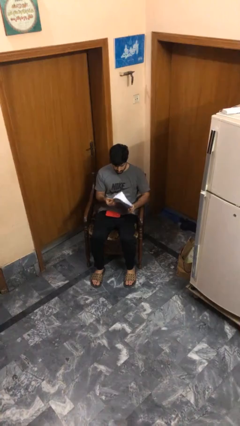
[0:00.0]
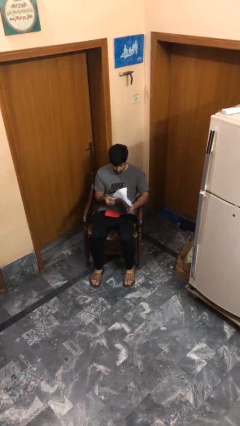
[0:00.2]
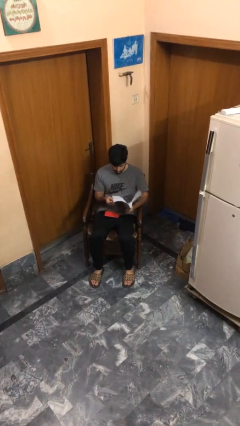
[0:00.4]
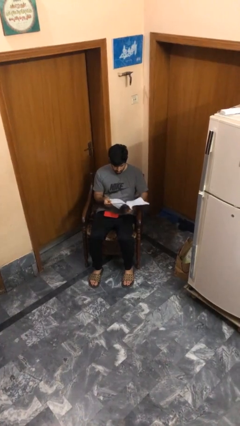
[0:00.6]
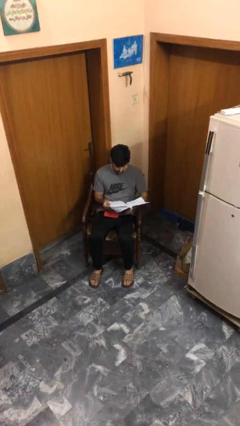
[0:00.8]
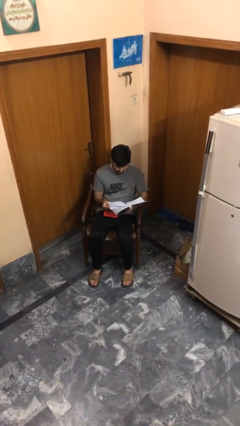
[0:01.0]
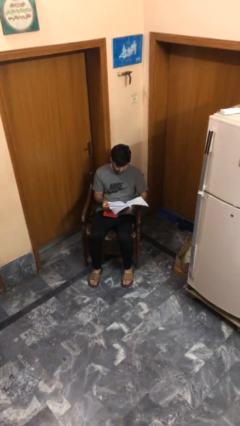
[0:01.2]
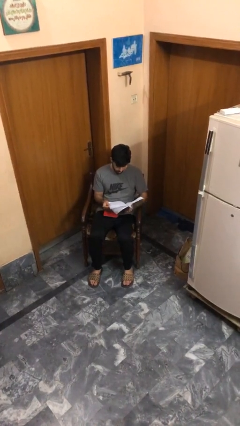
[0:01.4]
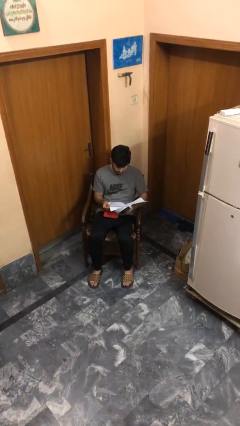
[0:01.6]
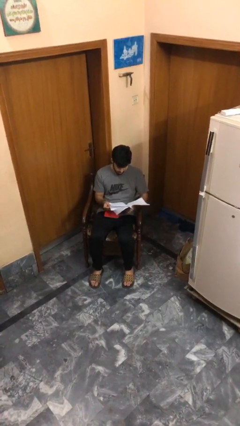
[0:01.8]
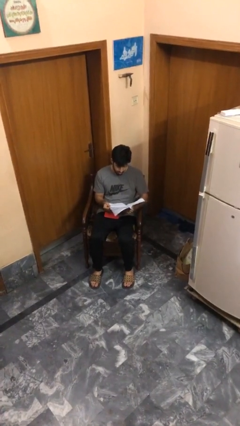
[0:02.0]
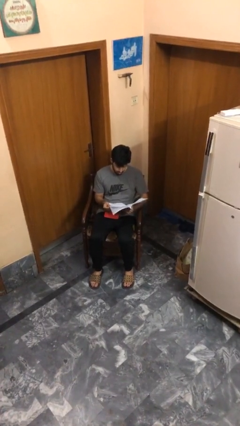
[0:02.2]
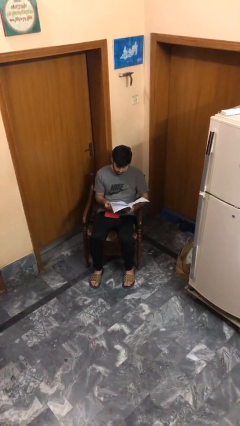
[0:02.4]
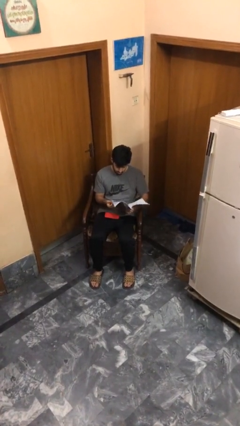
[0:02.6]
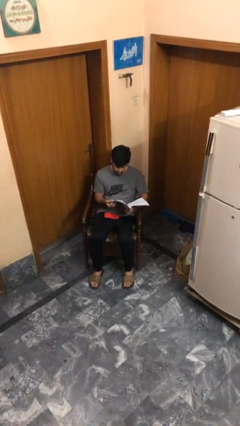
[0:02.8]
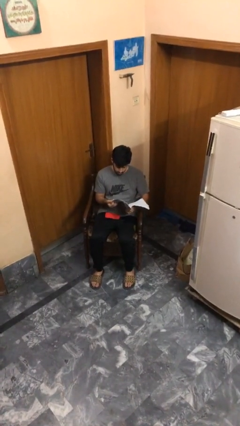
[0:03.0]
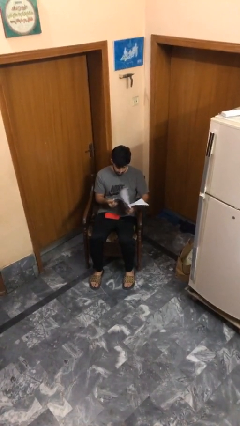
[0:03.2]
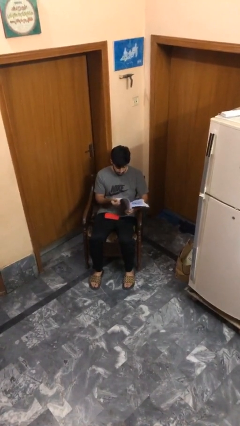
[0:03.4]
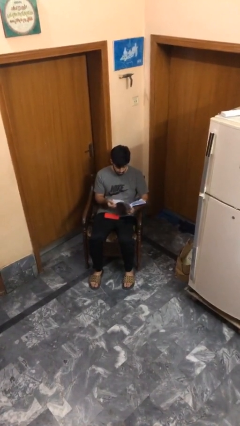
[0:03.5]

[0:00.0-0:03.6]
person reads magazine

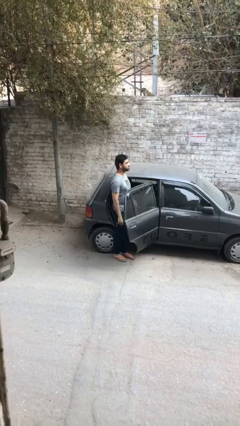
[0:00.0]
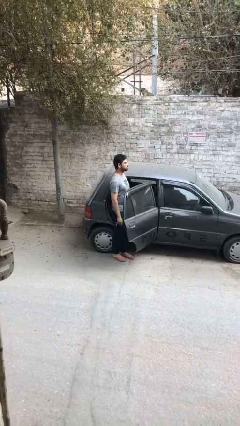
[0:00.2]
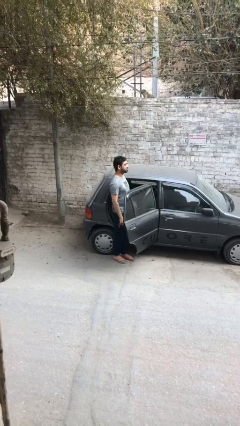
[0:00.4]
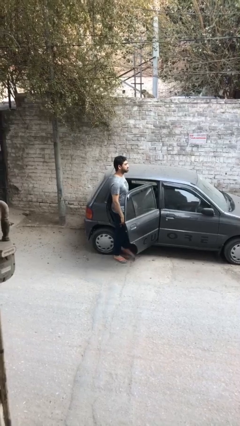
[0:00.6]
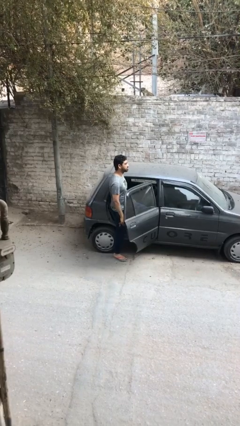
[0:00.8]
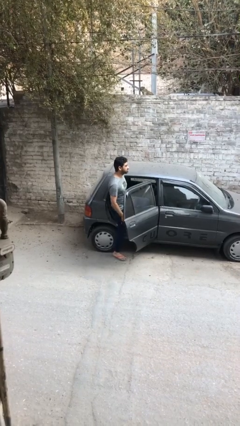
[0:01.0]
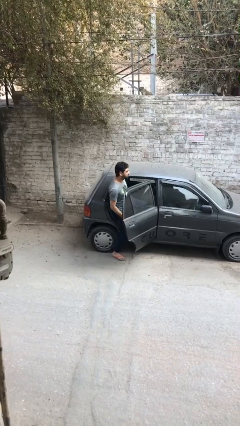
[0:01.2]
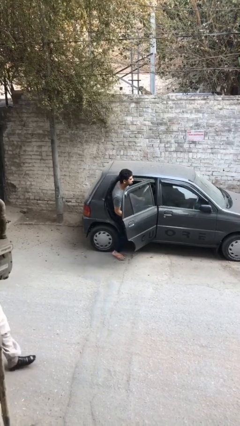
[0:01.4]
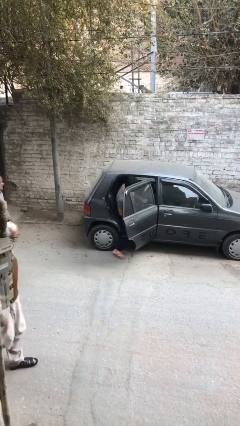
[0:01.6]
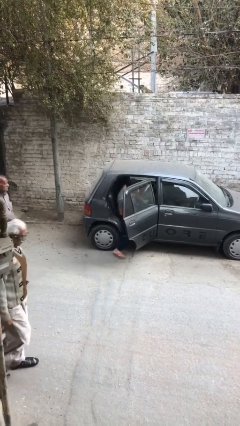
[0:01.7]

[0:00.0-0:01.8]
person enters car

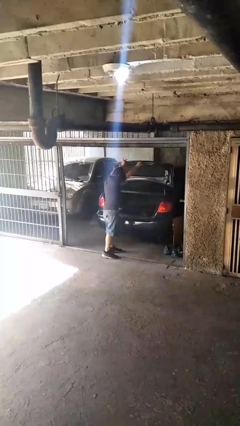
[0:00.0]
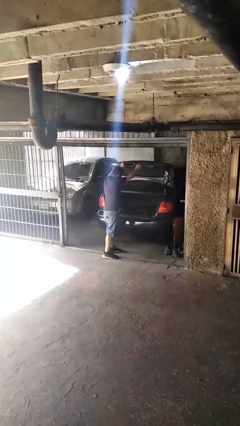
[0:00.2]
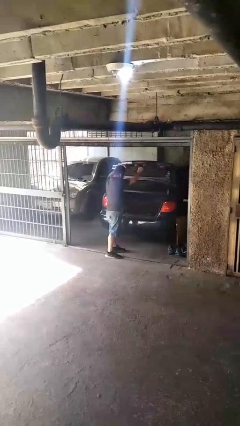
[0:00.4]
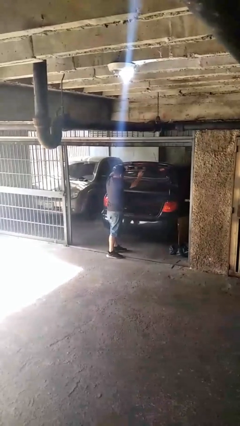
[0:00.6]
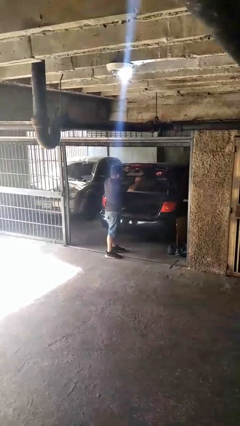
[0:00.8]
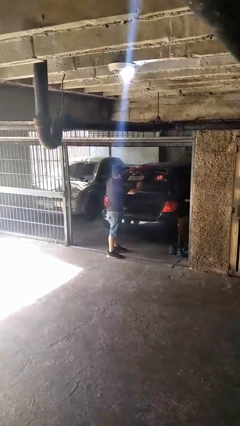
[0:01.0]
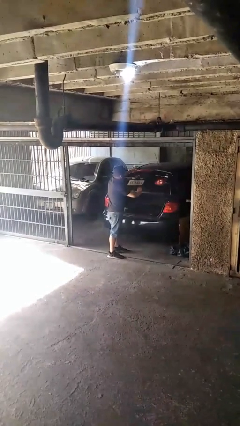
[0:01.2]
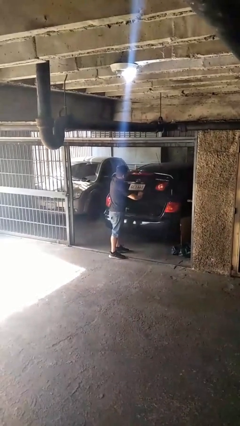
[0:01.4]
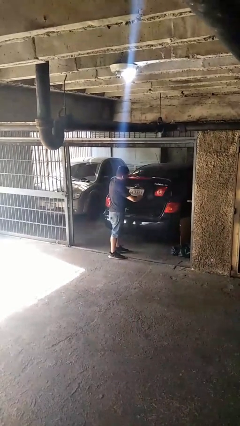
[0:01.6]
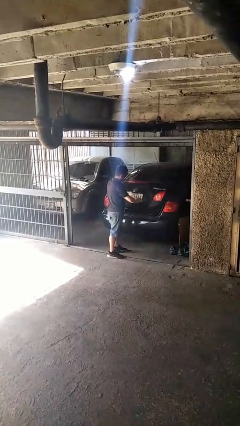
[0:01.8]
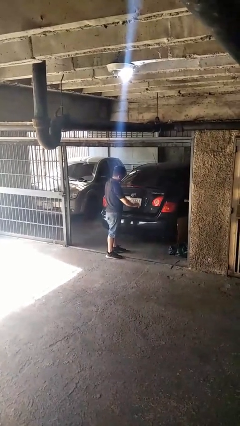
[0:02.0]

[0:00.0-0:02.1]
person closes car trunk

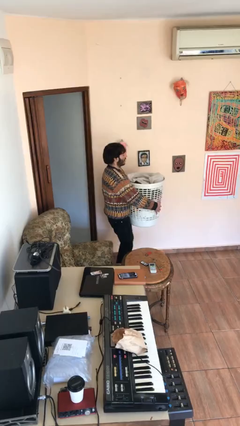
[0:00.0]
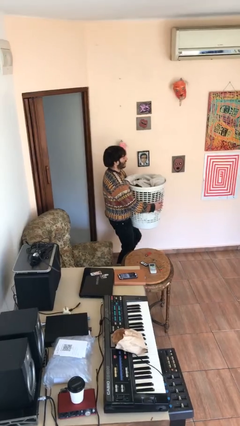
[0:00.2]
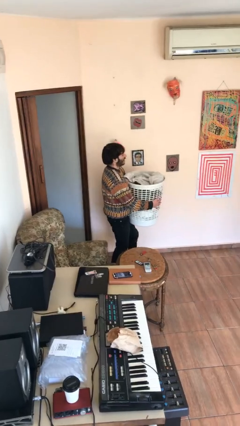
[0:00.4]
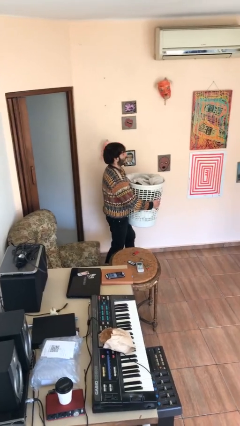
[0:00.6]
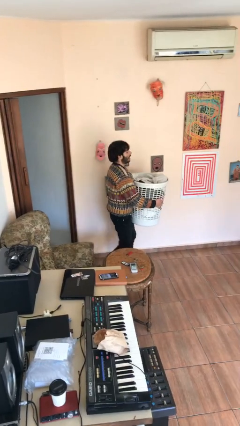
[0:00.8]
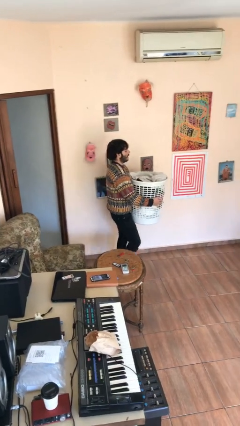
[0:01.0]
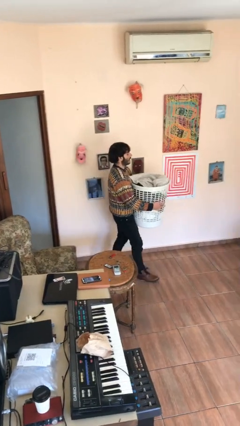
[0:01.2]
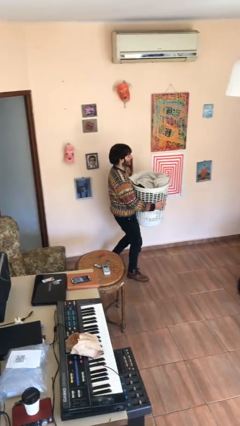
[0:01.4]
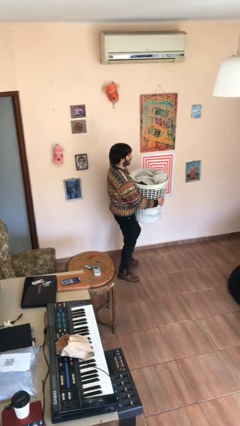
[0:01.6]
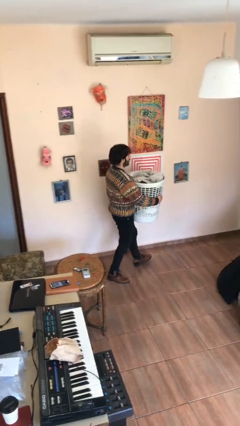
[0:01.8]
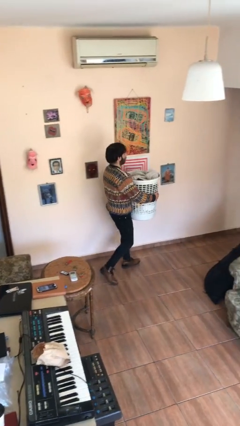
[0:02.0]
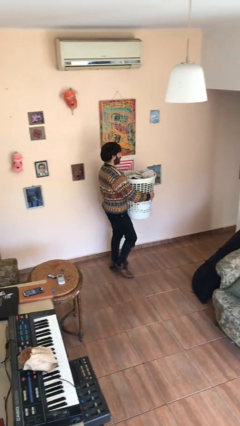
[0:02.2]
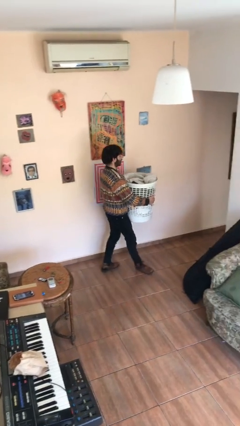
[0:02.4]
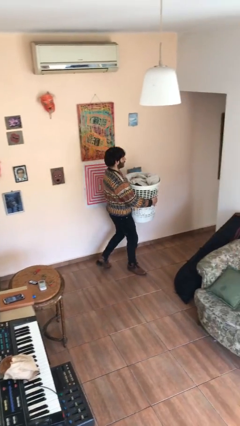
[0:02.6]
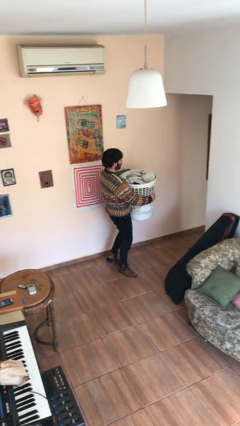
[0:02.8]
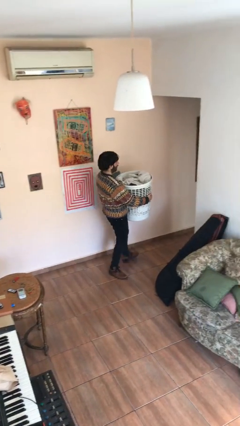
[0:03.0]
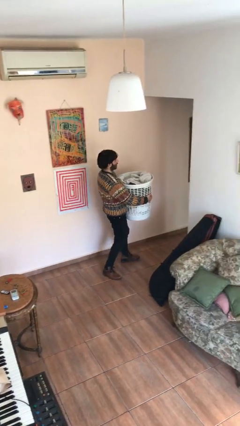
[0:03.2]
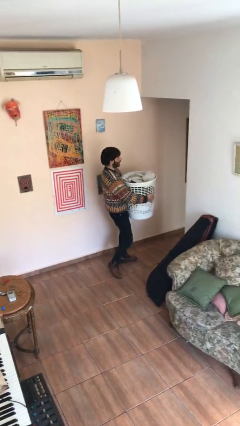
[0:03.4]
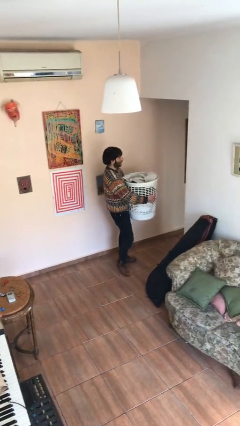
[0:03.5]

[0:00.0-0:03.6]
person carries laundry basket

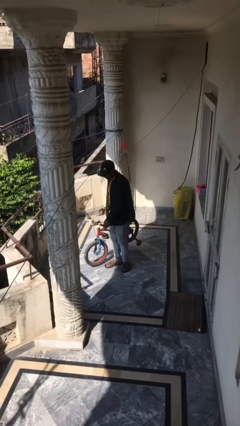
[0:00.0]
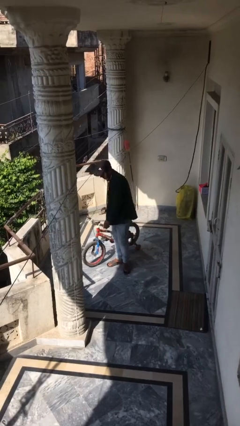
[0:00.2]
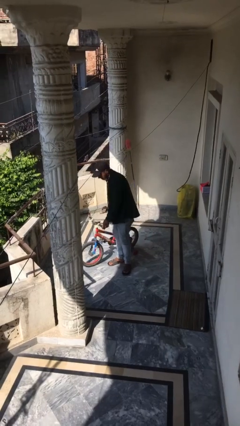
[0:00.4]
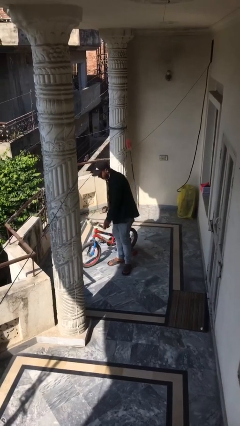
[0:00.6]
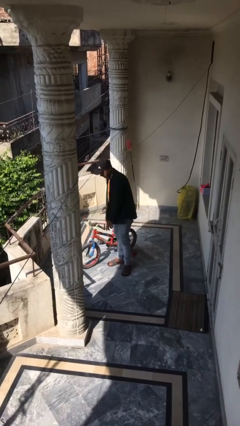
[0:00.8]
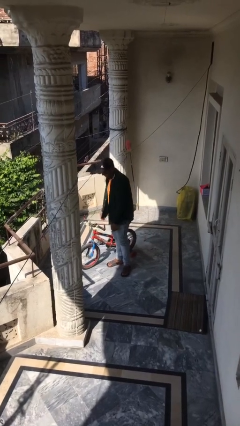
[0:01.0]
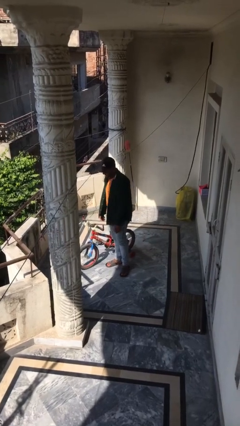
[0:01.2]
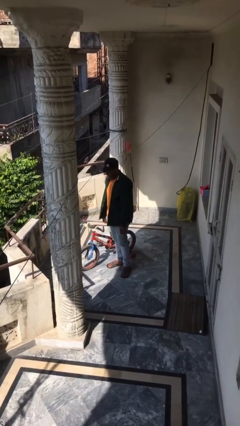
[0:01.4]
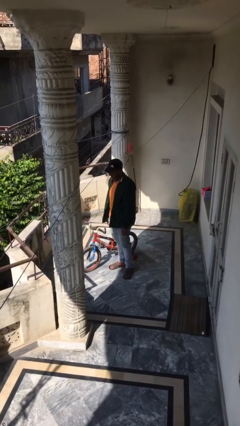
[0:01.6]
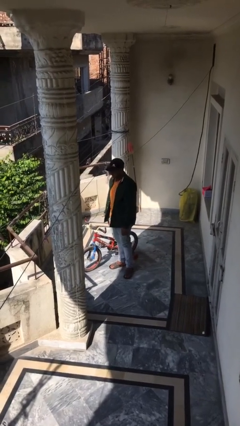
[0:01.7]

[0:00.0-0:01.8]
person puts down object on floor

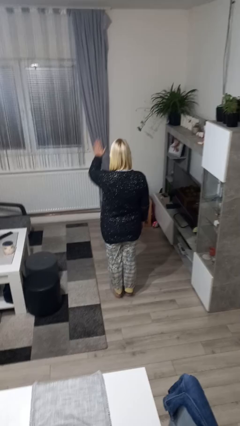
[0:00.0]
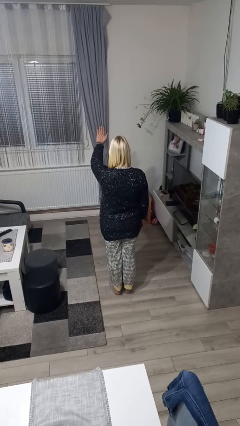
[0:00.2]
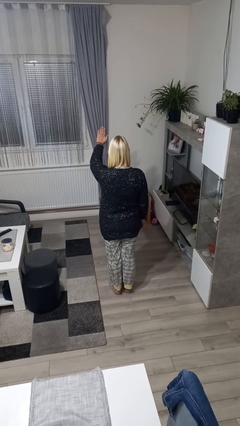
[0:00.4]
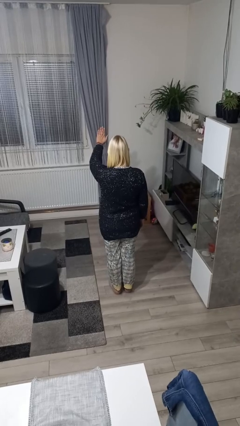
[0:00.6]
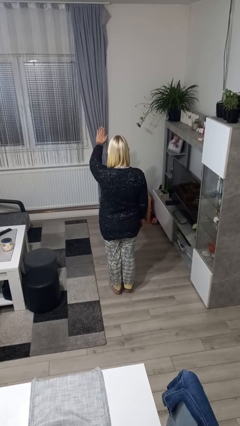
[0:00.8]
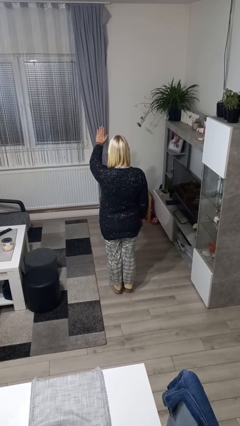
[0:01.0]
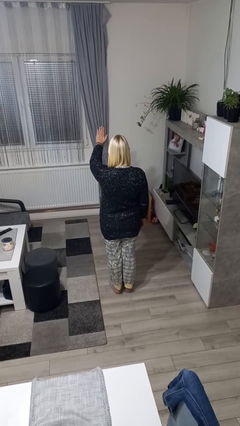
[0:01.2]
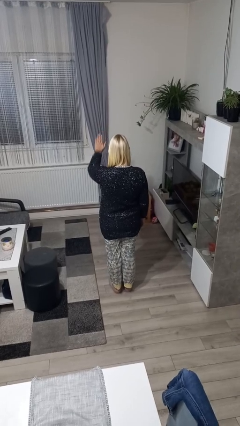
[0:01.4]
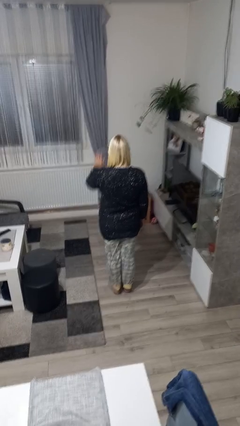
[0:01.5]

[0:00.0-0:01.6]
person gestures stop

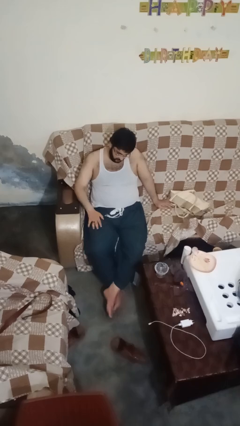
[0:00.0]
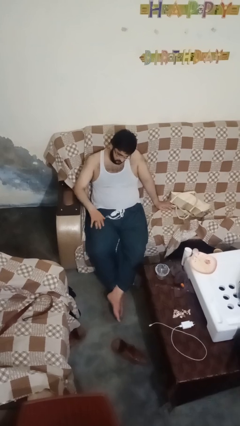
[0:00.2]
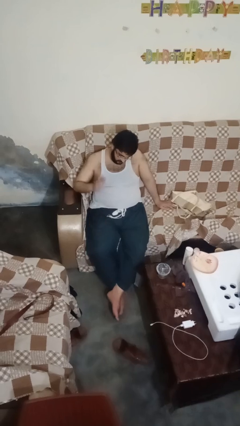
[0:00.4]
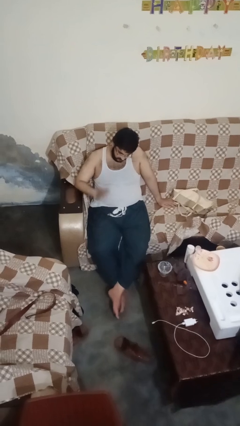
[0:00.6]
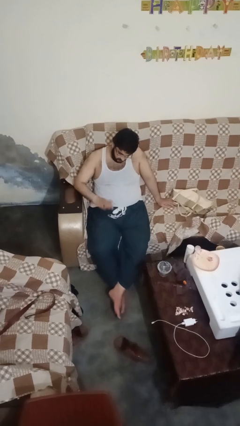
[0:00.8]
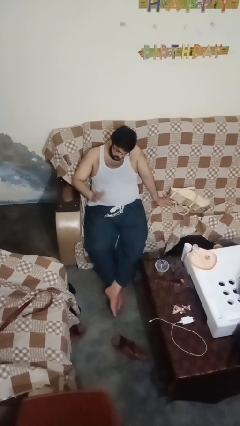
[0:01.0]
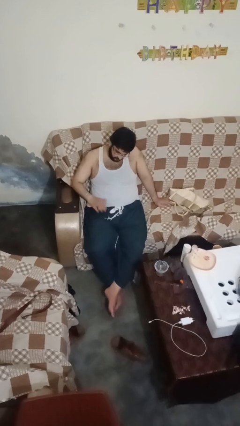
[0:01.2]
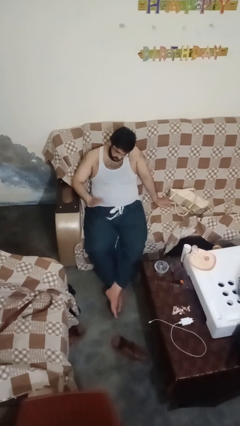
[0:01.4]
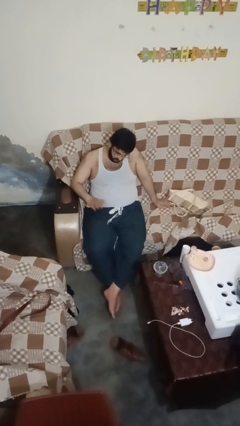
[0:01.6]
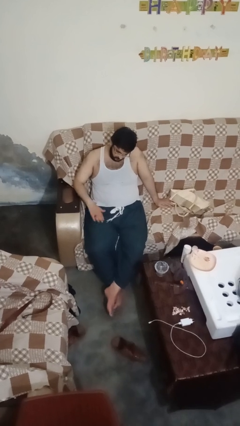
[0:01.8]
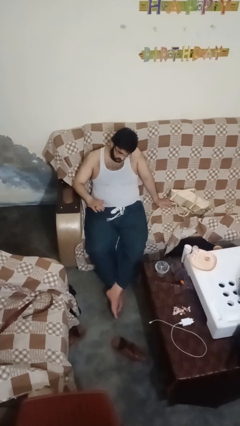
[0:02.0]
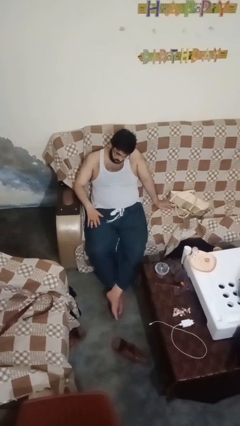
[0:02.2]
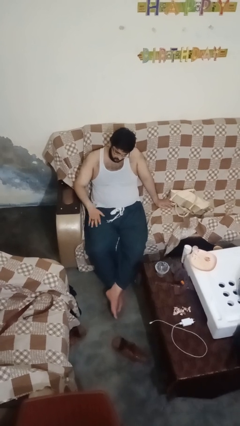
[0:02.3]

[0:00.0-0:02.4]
person slaps hands on thighs
